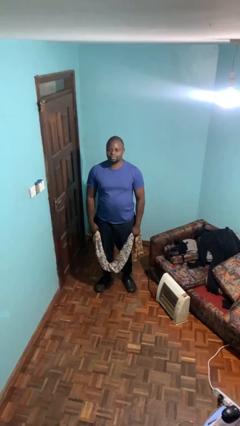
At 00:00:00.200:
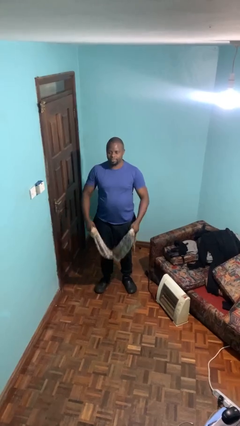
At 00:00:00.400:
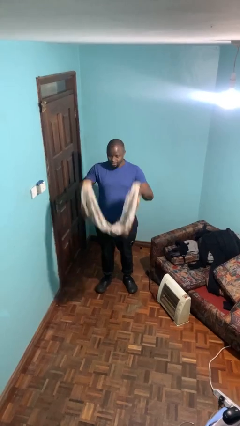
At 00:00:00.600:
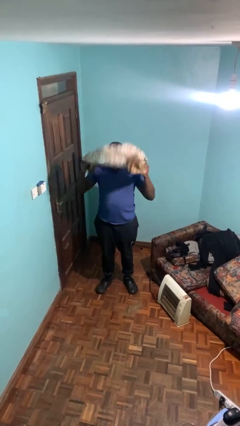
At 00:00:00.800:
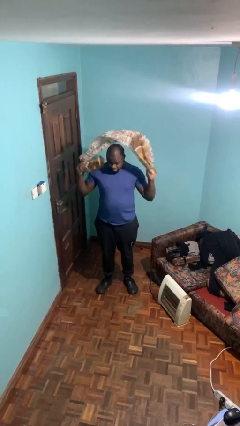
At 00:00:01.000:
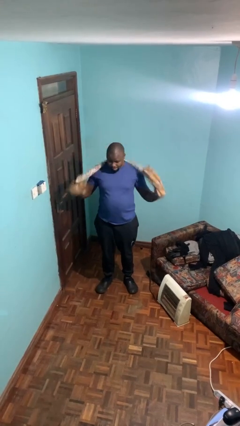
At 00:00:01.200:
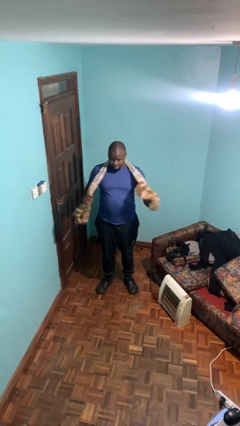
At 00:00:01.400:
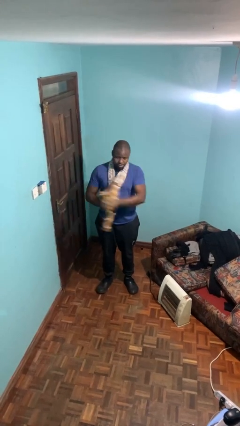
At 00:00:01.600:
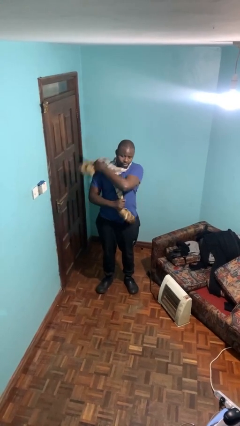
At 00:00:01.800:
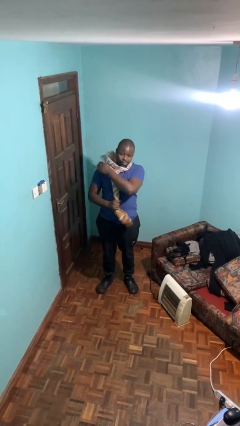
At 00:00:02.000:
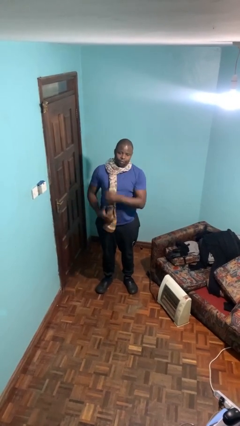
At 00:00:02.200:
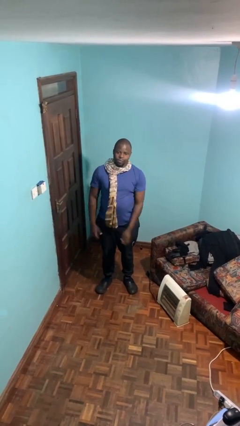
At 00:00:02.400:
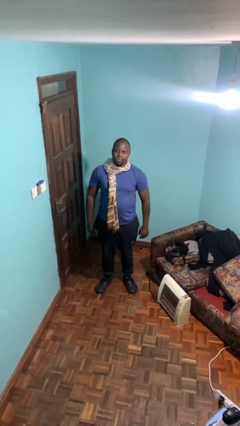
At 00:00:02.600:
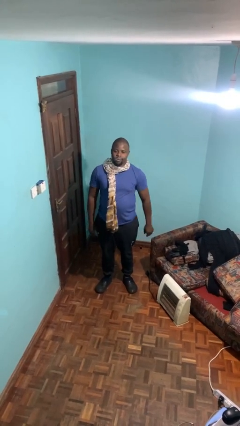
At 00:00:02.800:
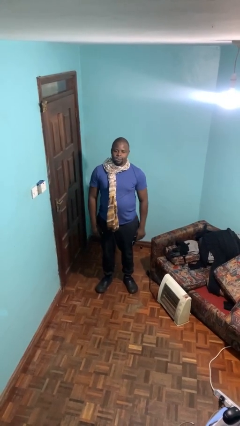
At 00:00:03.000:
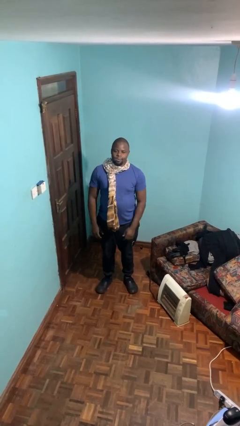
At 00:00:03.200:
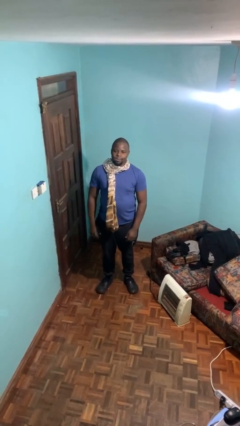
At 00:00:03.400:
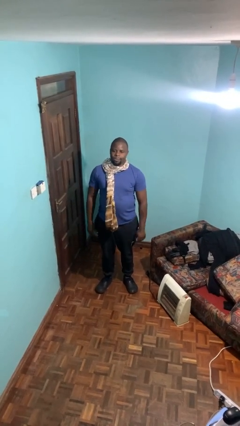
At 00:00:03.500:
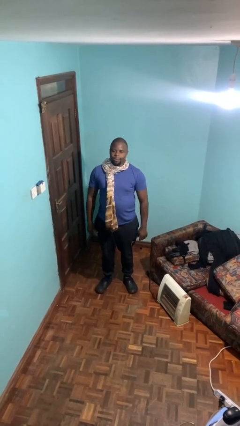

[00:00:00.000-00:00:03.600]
person puts on scarf

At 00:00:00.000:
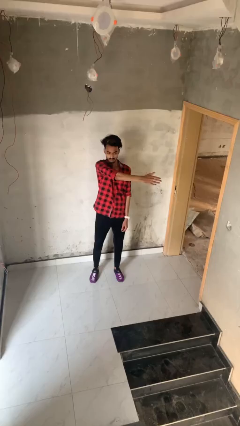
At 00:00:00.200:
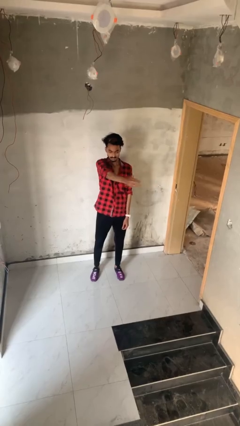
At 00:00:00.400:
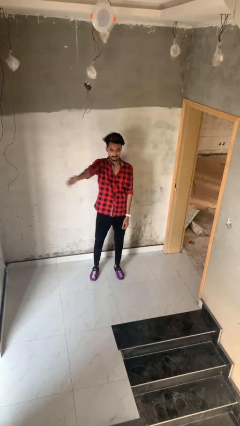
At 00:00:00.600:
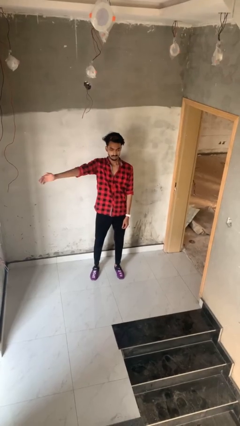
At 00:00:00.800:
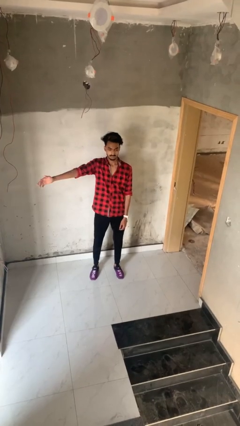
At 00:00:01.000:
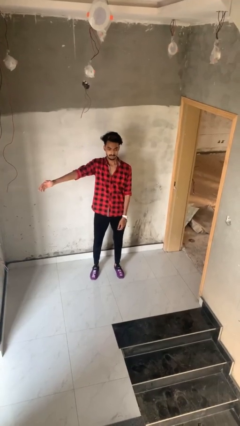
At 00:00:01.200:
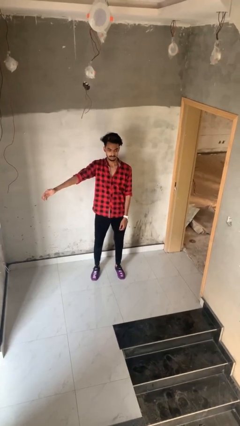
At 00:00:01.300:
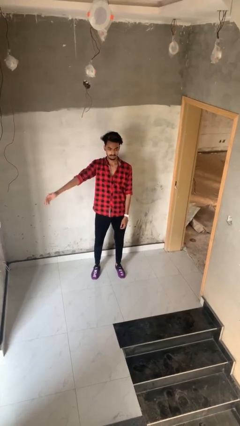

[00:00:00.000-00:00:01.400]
person gestures swipe right

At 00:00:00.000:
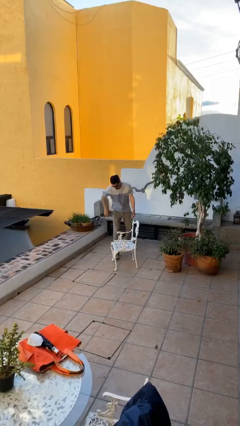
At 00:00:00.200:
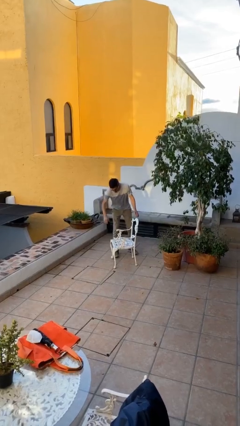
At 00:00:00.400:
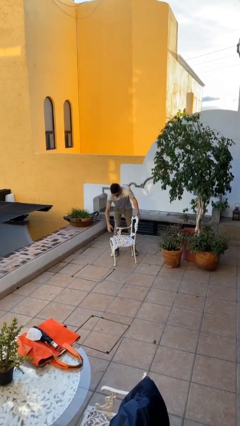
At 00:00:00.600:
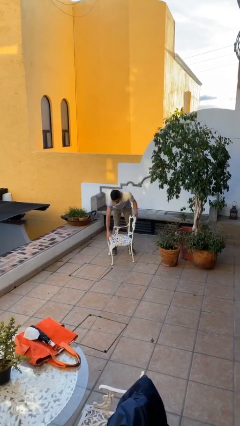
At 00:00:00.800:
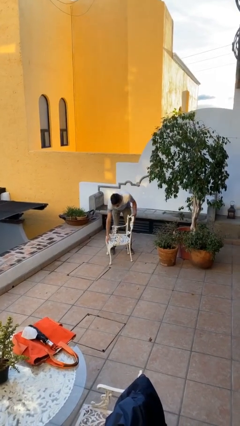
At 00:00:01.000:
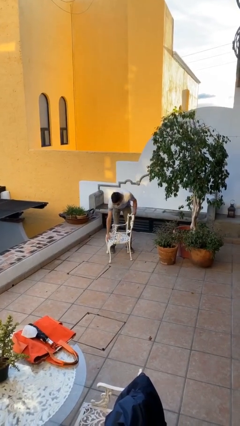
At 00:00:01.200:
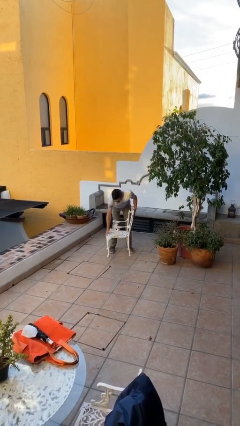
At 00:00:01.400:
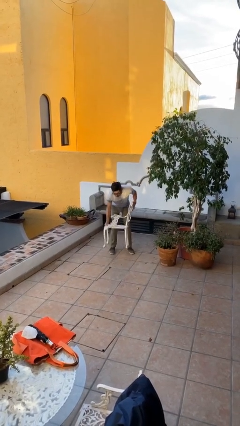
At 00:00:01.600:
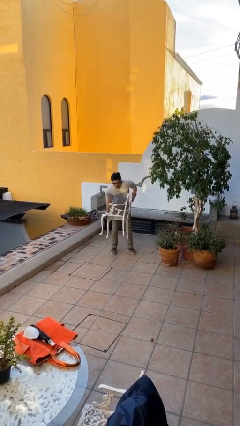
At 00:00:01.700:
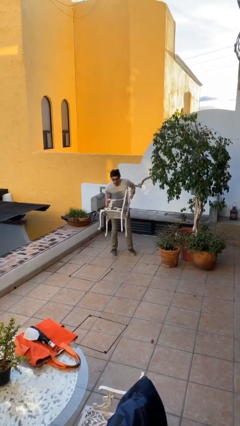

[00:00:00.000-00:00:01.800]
person picks up object from floor

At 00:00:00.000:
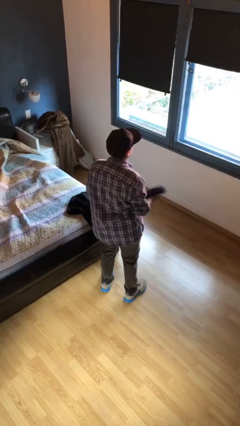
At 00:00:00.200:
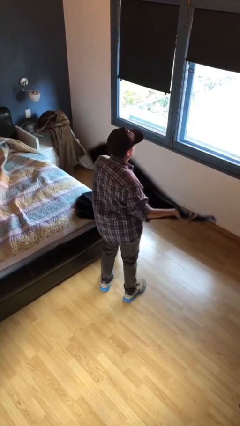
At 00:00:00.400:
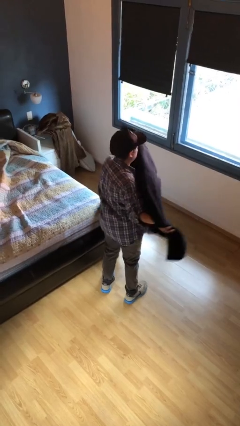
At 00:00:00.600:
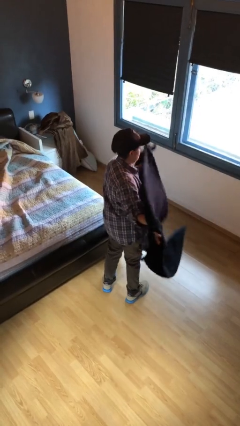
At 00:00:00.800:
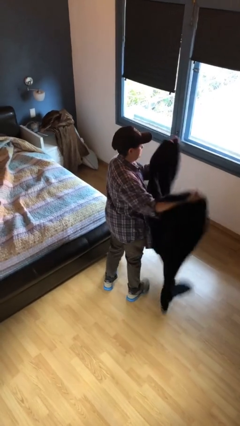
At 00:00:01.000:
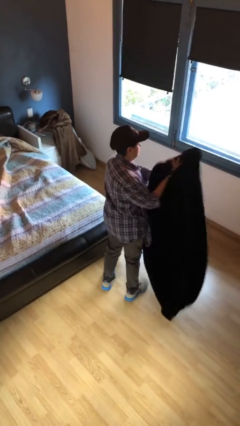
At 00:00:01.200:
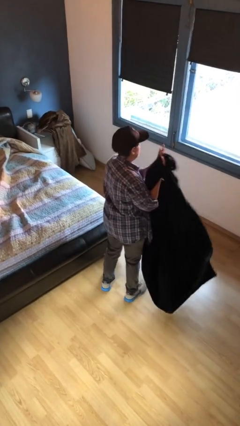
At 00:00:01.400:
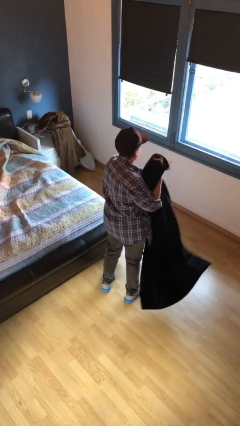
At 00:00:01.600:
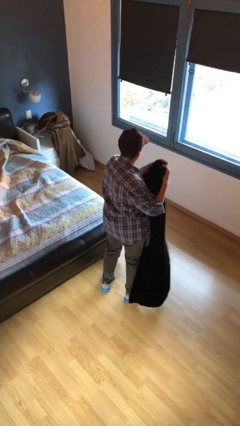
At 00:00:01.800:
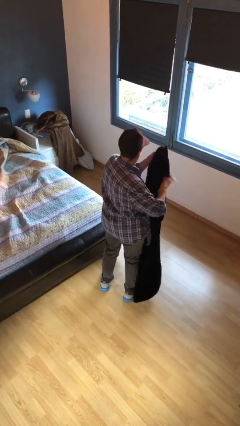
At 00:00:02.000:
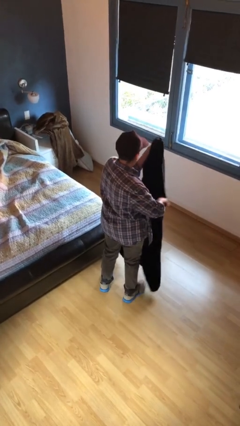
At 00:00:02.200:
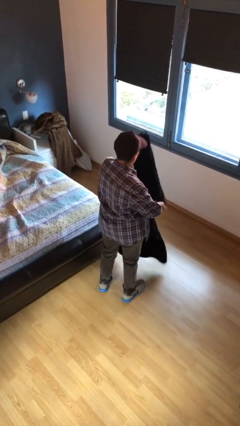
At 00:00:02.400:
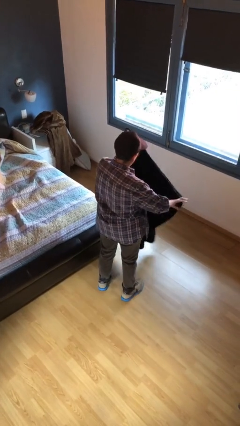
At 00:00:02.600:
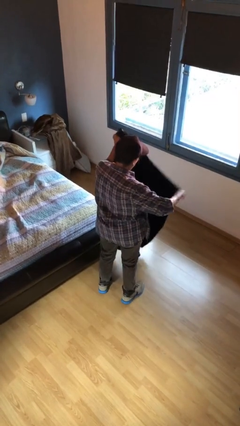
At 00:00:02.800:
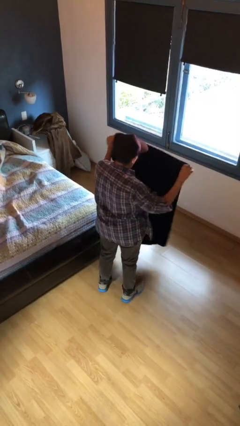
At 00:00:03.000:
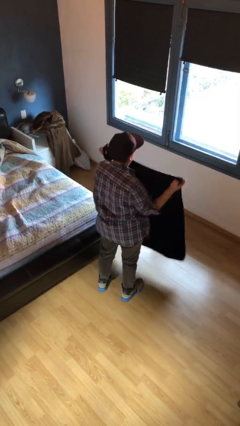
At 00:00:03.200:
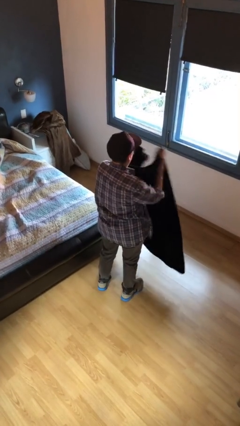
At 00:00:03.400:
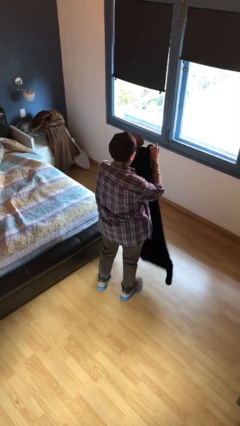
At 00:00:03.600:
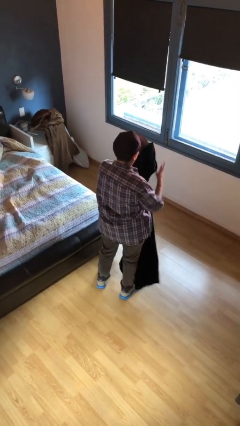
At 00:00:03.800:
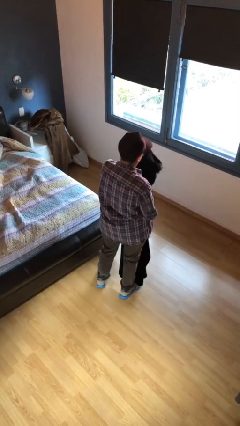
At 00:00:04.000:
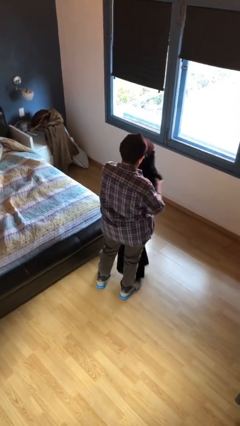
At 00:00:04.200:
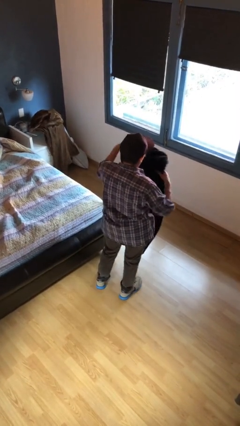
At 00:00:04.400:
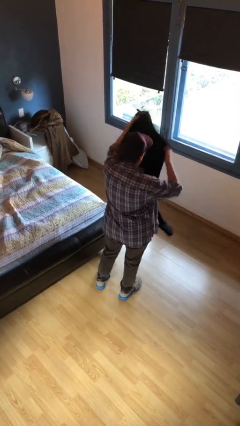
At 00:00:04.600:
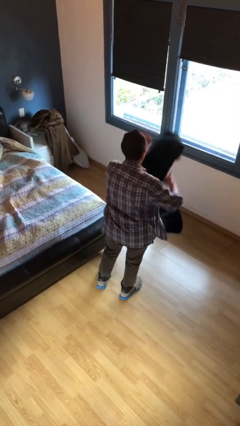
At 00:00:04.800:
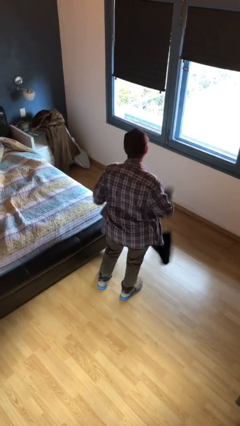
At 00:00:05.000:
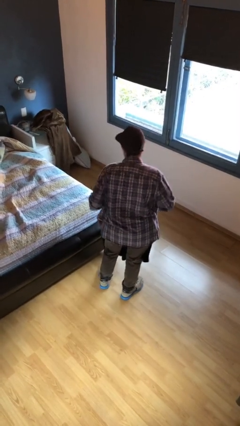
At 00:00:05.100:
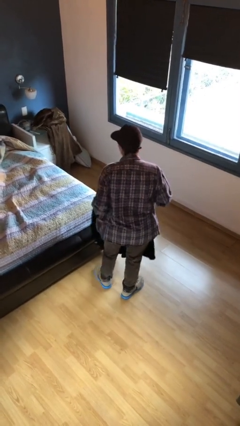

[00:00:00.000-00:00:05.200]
person folds blanket

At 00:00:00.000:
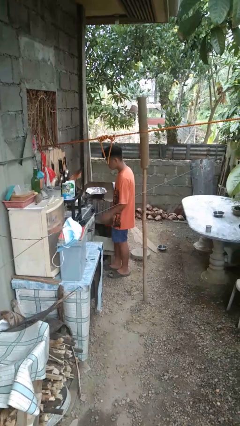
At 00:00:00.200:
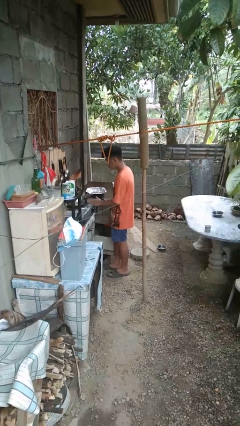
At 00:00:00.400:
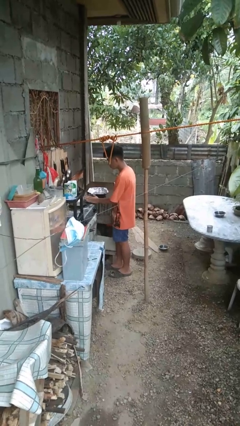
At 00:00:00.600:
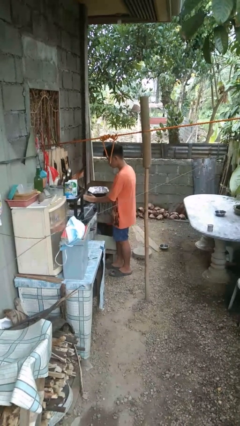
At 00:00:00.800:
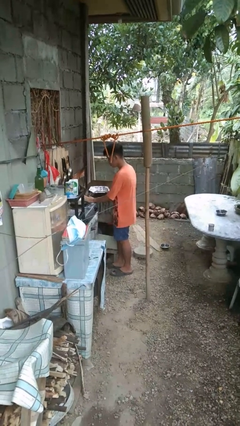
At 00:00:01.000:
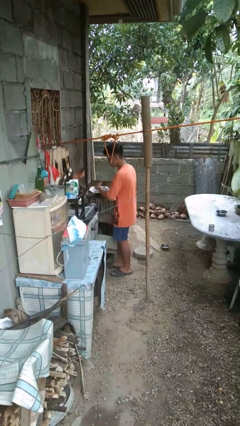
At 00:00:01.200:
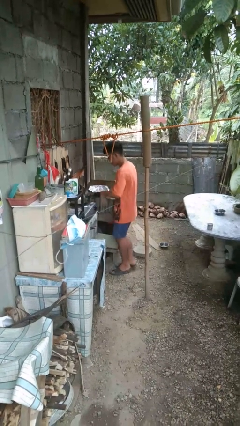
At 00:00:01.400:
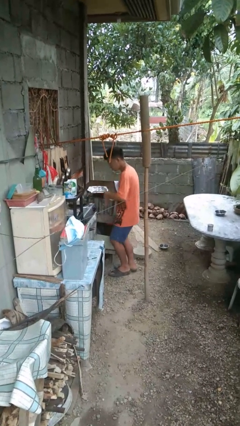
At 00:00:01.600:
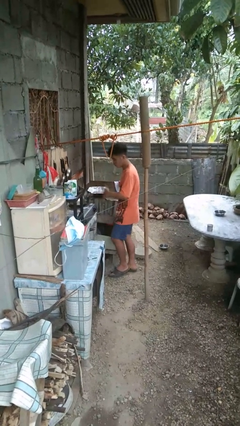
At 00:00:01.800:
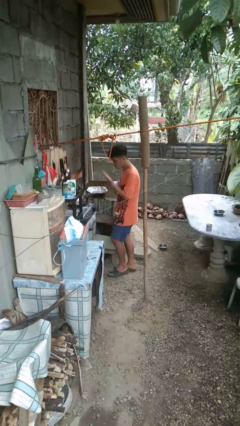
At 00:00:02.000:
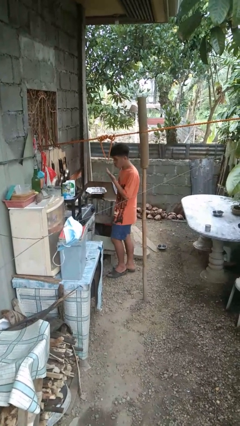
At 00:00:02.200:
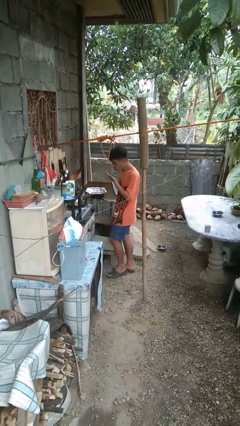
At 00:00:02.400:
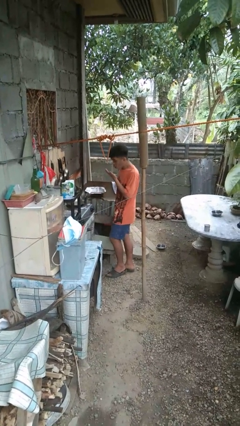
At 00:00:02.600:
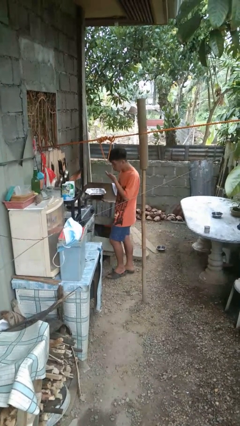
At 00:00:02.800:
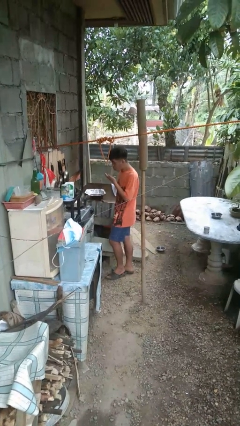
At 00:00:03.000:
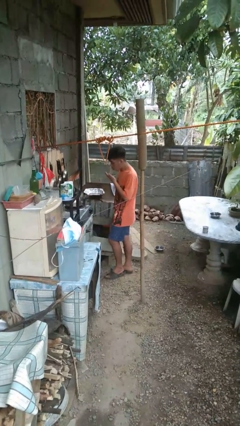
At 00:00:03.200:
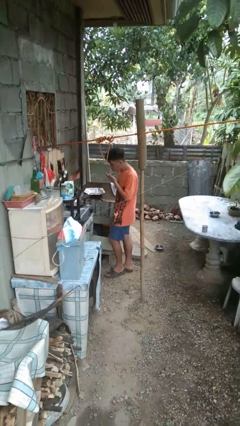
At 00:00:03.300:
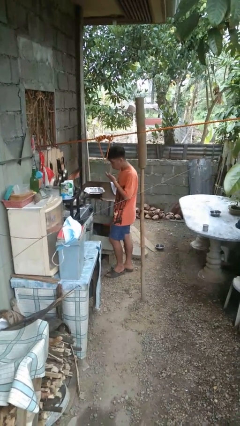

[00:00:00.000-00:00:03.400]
person burns hand

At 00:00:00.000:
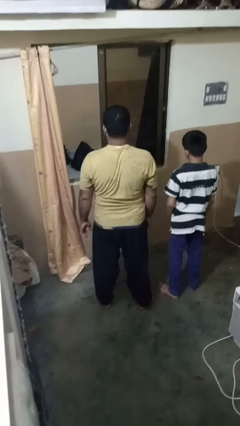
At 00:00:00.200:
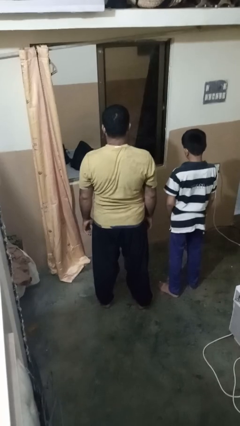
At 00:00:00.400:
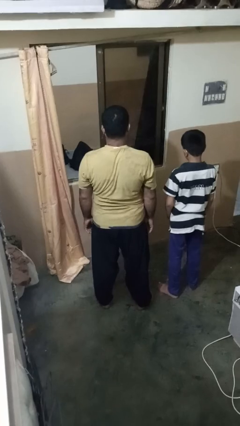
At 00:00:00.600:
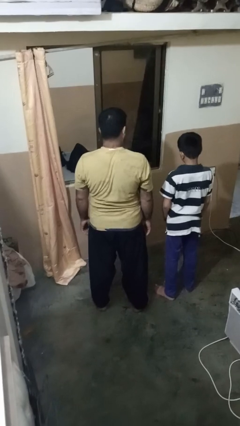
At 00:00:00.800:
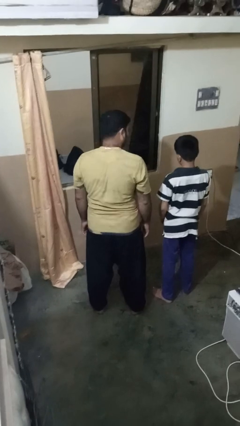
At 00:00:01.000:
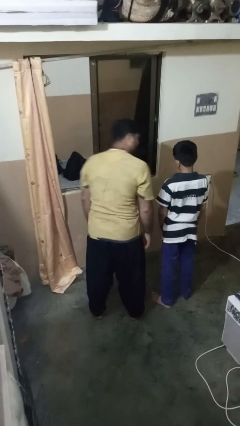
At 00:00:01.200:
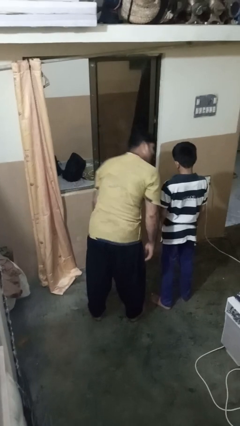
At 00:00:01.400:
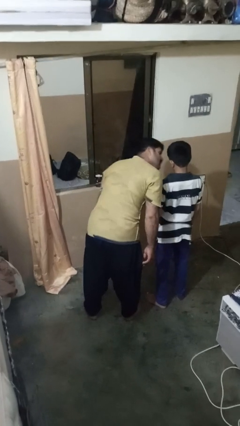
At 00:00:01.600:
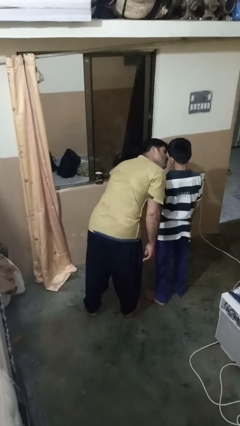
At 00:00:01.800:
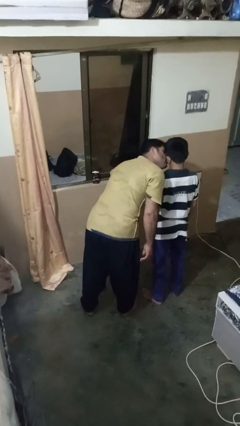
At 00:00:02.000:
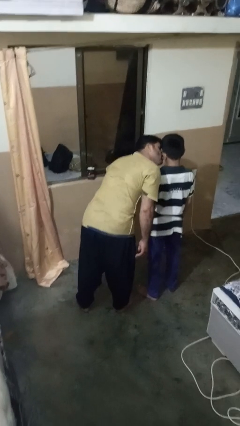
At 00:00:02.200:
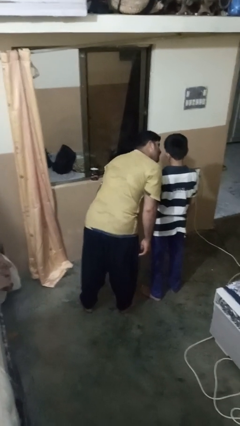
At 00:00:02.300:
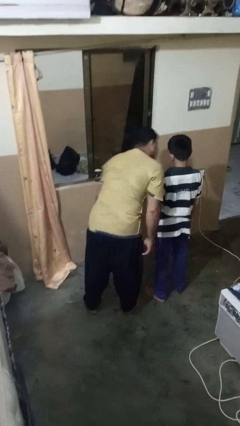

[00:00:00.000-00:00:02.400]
person kisses cheek of person
